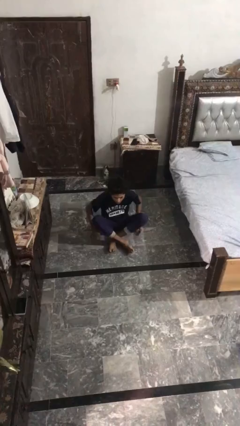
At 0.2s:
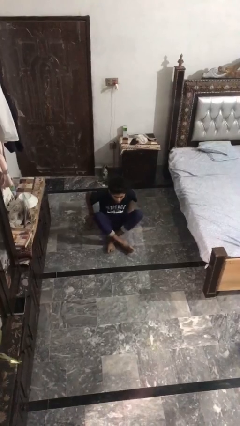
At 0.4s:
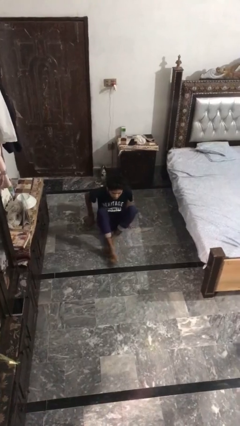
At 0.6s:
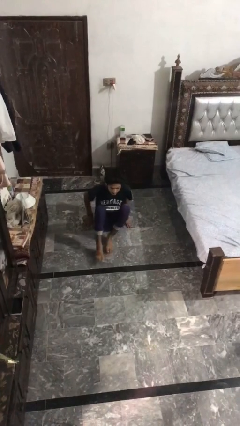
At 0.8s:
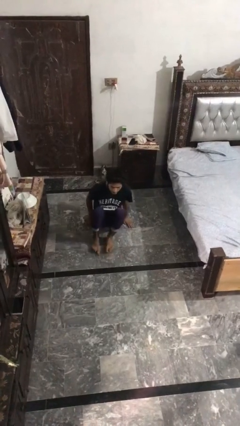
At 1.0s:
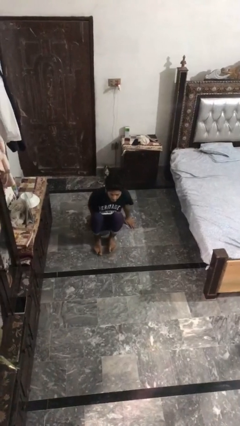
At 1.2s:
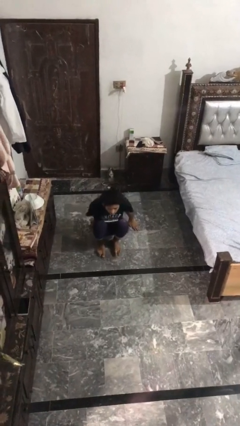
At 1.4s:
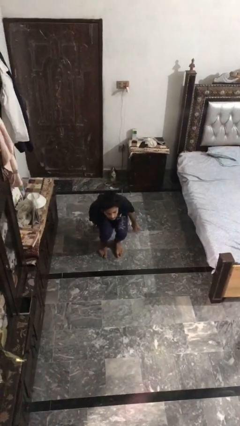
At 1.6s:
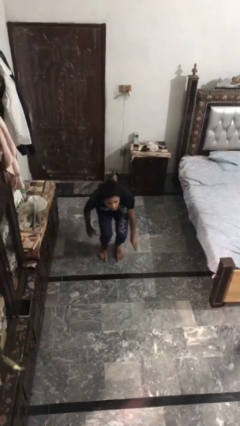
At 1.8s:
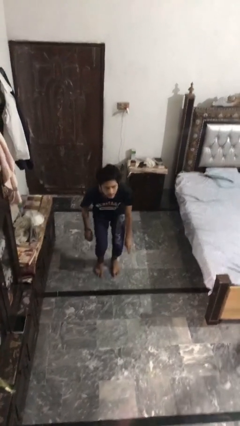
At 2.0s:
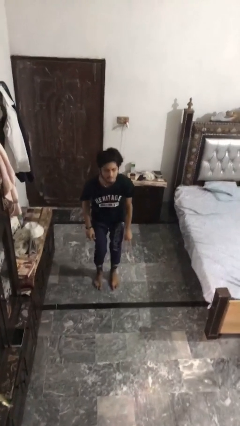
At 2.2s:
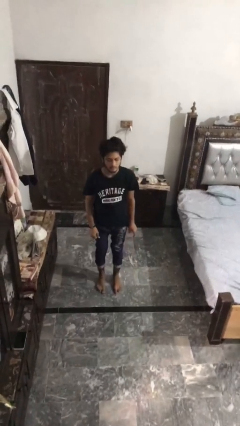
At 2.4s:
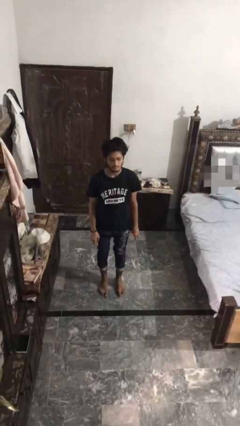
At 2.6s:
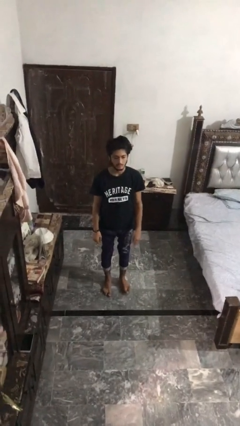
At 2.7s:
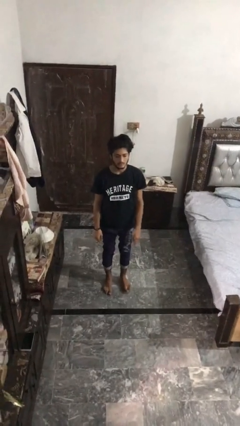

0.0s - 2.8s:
person stands up from floor

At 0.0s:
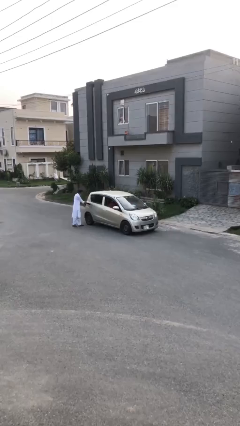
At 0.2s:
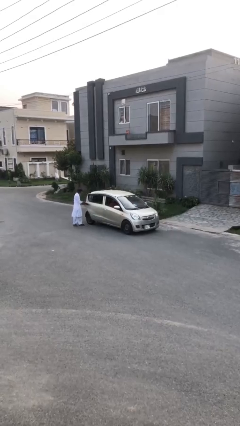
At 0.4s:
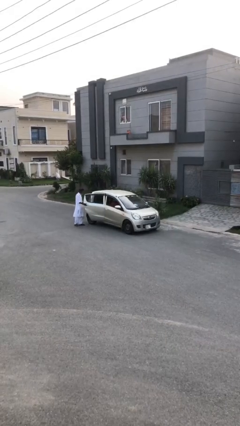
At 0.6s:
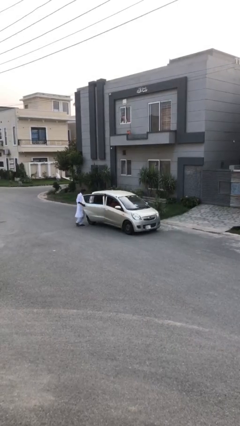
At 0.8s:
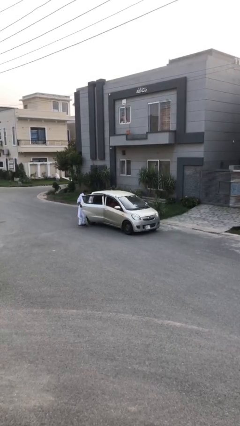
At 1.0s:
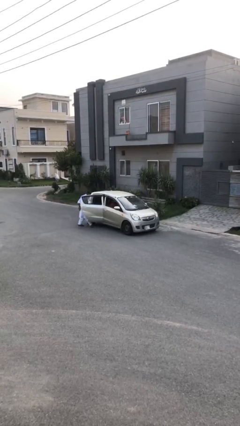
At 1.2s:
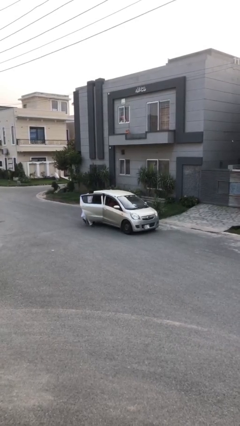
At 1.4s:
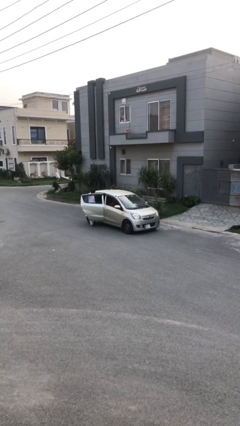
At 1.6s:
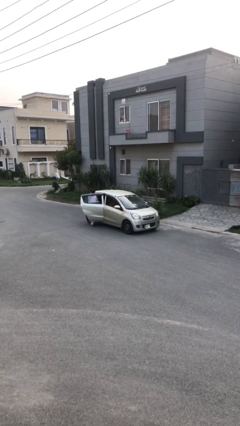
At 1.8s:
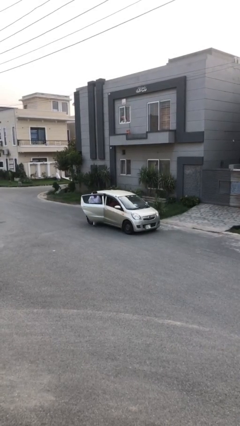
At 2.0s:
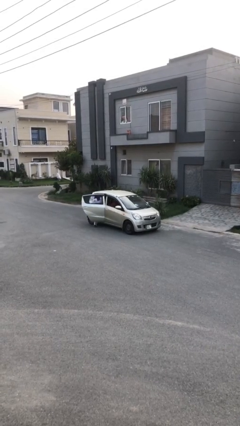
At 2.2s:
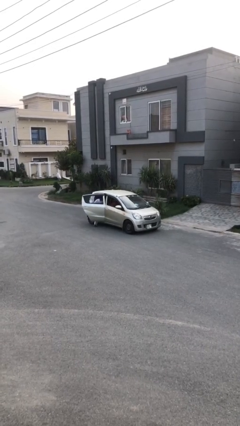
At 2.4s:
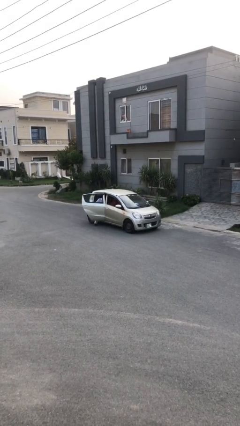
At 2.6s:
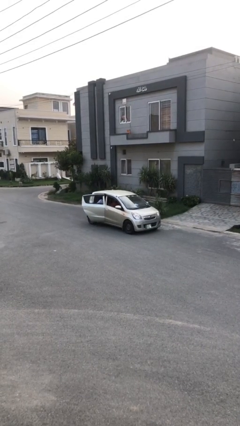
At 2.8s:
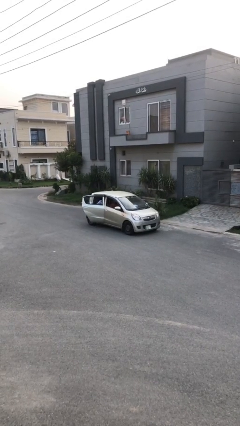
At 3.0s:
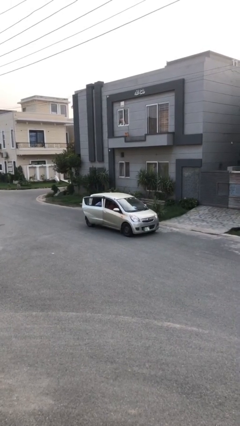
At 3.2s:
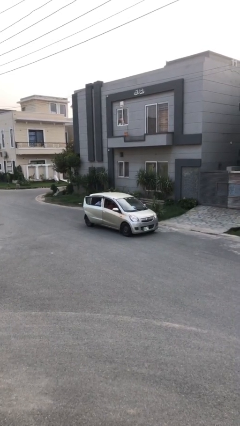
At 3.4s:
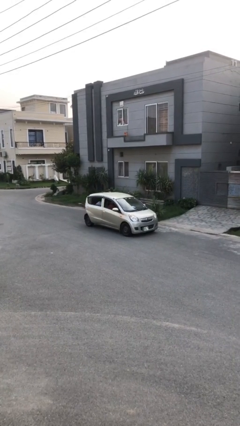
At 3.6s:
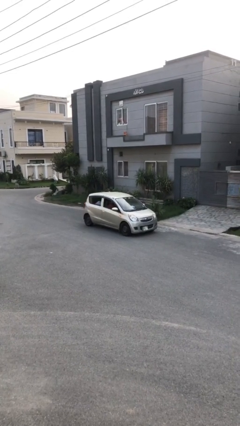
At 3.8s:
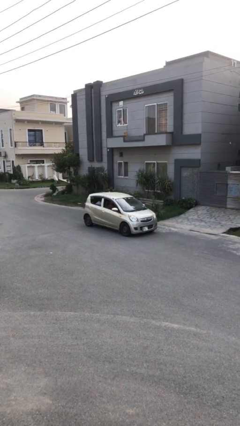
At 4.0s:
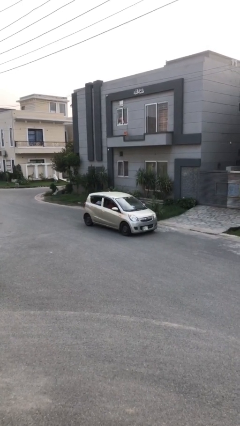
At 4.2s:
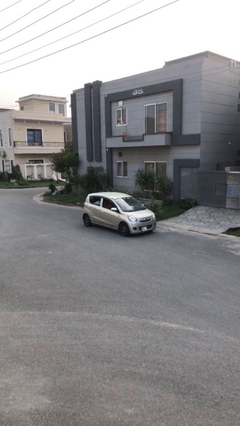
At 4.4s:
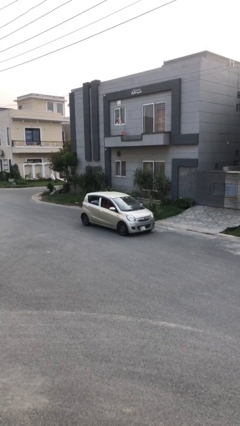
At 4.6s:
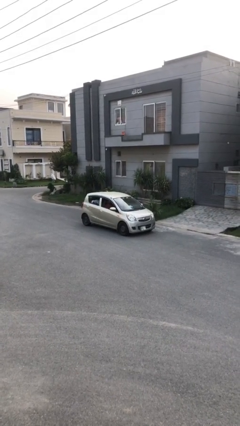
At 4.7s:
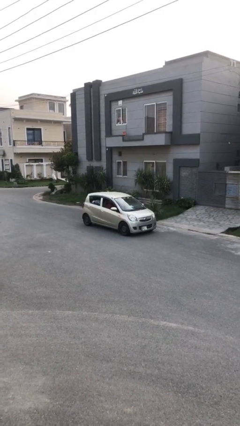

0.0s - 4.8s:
car picks up person

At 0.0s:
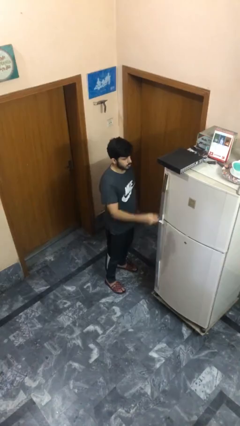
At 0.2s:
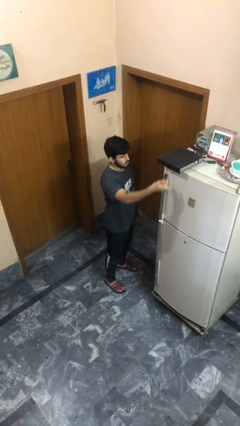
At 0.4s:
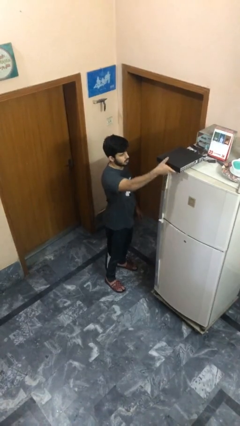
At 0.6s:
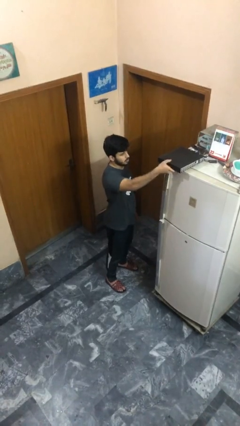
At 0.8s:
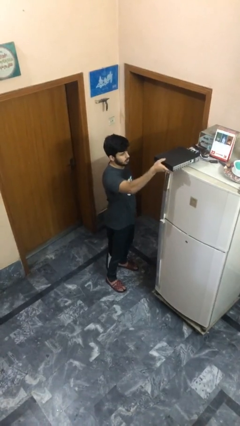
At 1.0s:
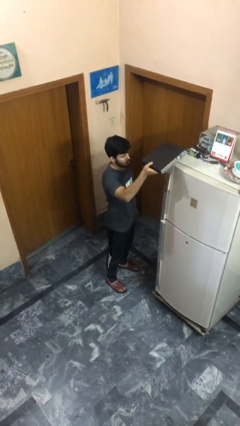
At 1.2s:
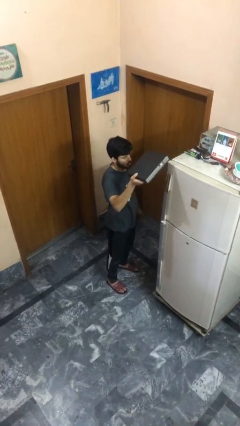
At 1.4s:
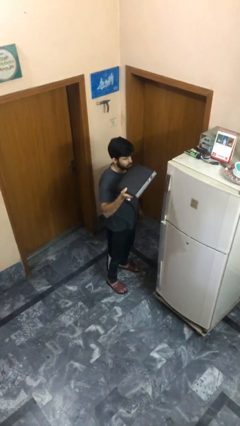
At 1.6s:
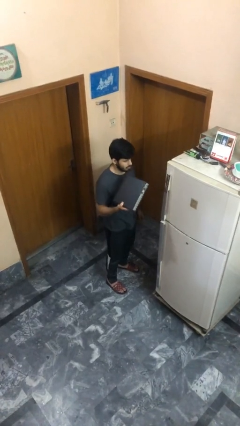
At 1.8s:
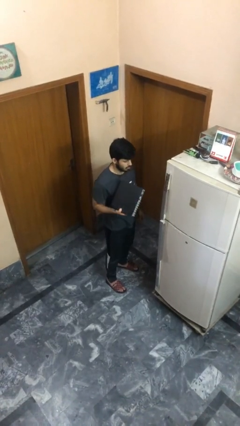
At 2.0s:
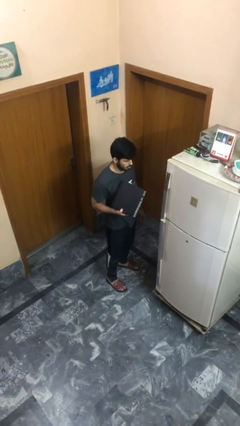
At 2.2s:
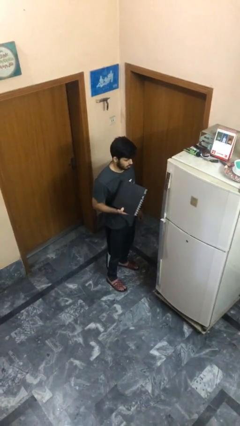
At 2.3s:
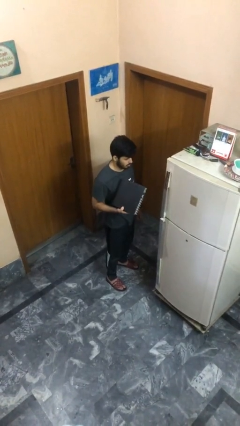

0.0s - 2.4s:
person picks up object from countertop

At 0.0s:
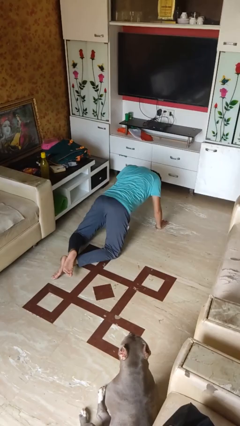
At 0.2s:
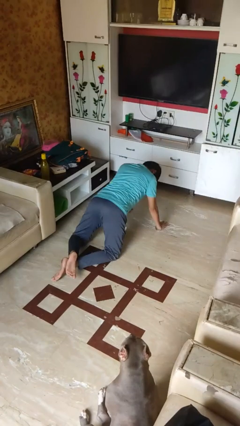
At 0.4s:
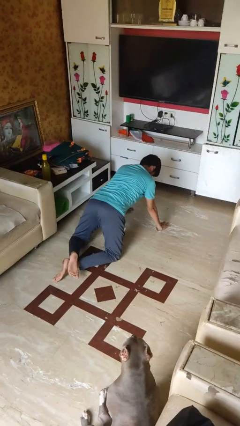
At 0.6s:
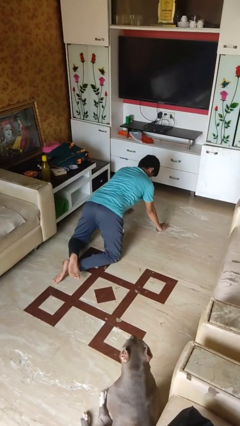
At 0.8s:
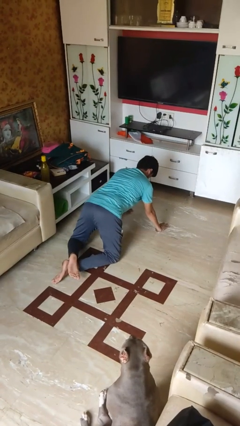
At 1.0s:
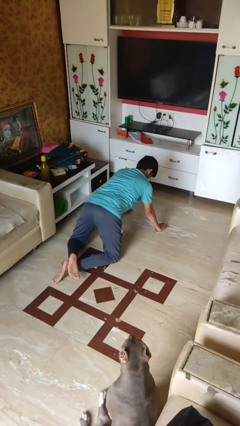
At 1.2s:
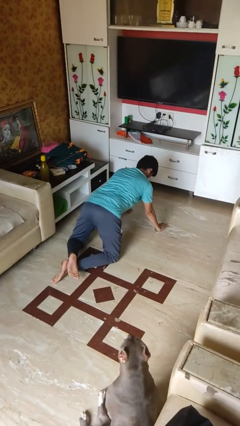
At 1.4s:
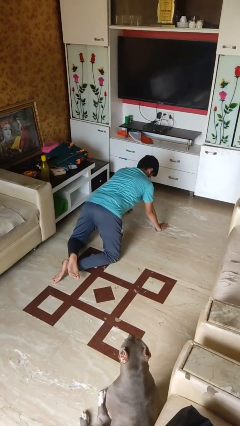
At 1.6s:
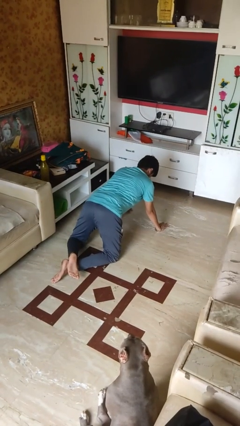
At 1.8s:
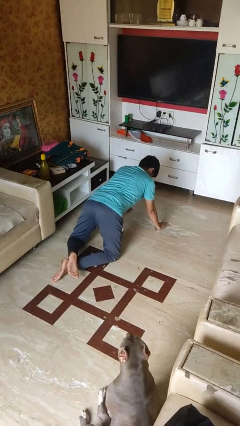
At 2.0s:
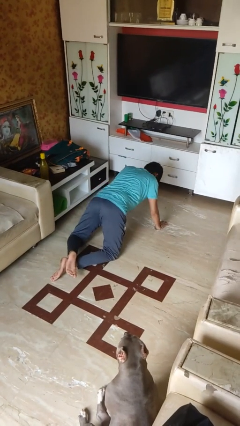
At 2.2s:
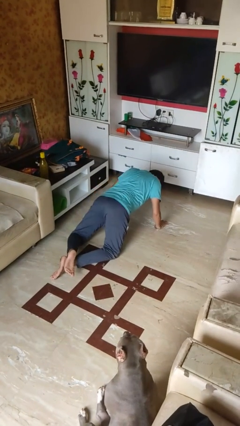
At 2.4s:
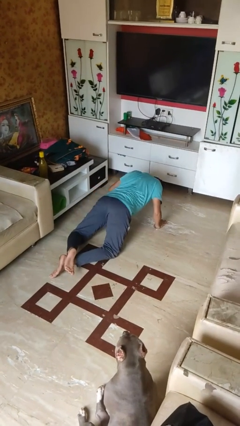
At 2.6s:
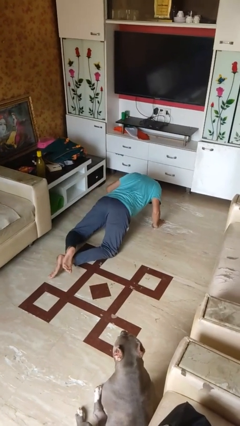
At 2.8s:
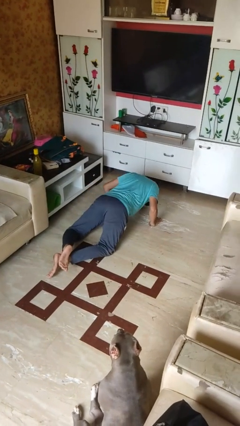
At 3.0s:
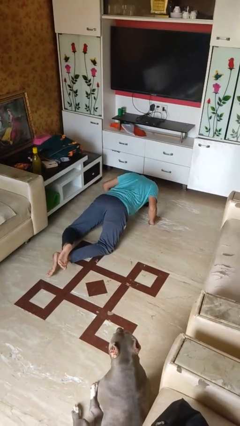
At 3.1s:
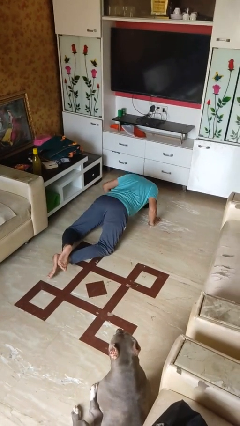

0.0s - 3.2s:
person exercises with pushup

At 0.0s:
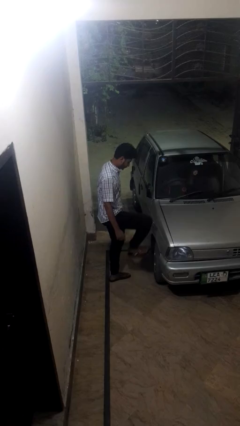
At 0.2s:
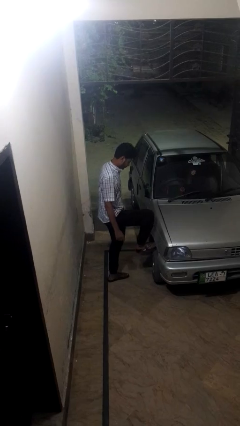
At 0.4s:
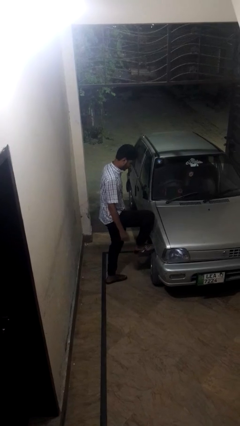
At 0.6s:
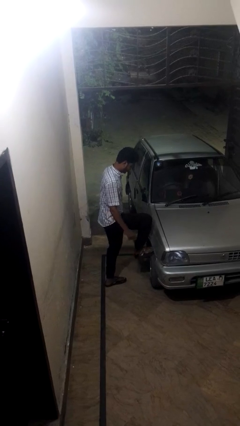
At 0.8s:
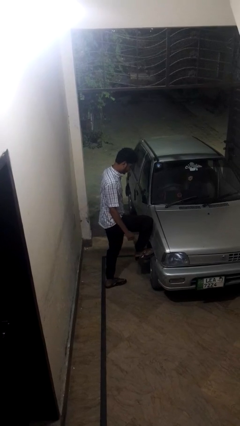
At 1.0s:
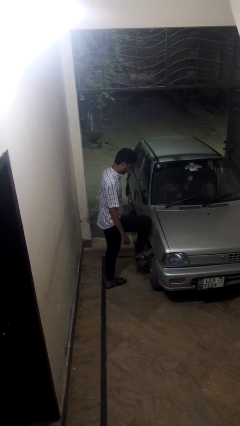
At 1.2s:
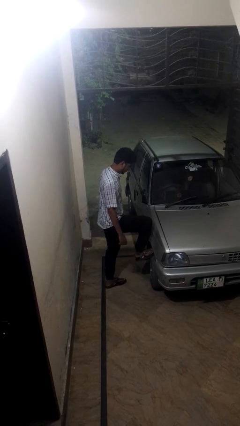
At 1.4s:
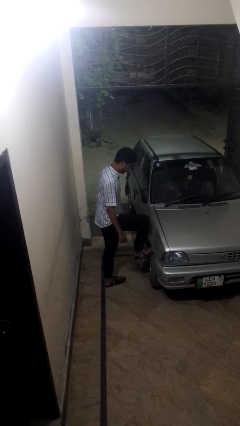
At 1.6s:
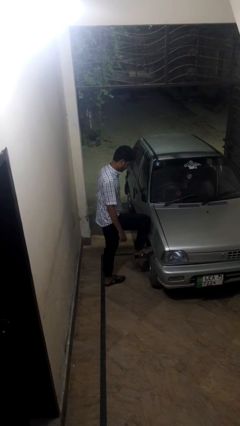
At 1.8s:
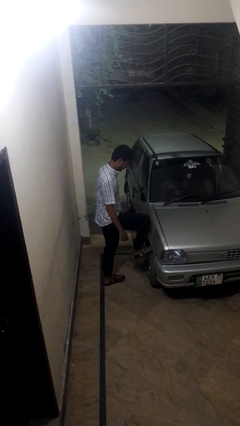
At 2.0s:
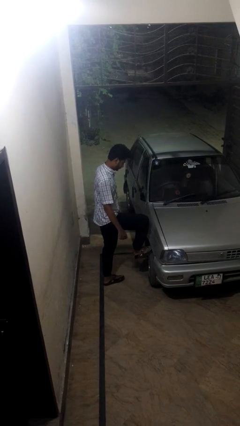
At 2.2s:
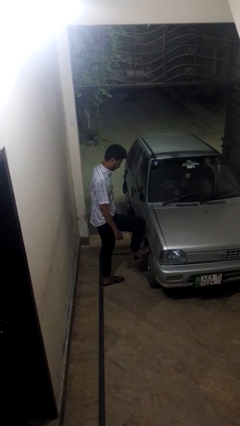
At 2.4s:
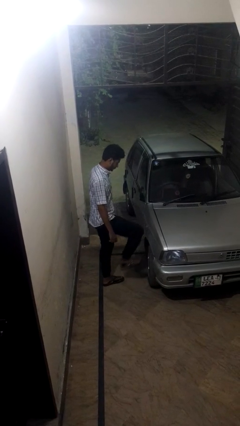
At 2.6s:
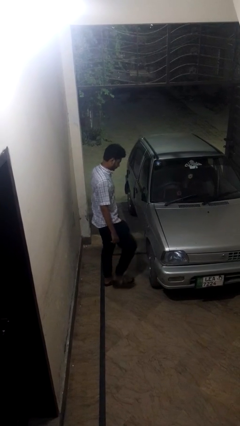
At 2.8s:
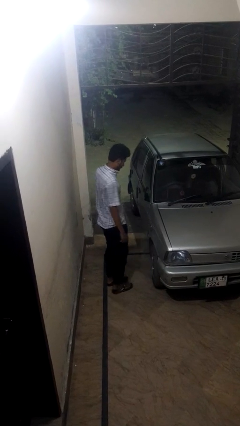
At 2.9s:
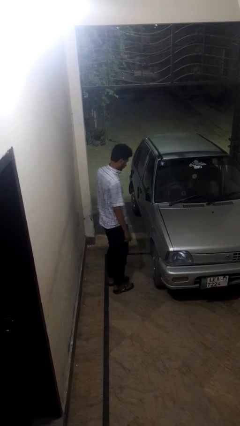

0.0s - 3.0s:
person kicks car tires

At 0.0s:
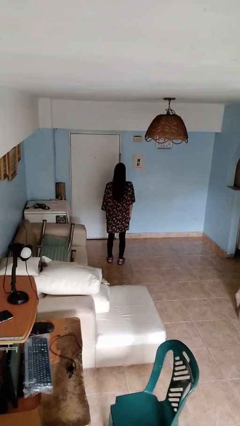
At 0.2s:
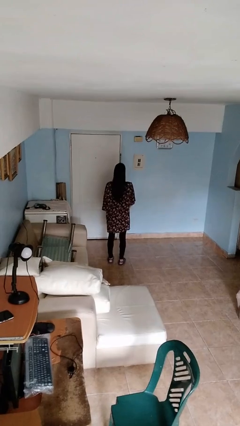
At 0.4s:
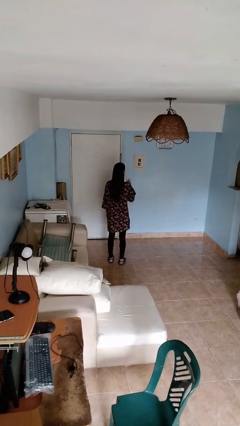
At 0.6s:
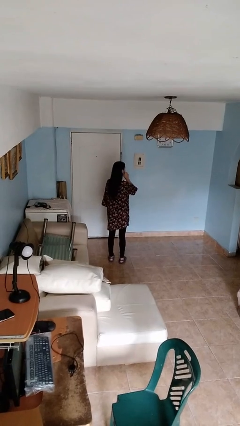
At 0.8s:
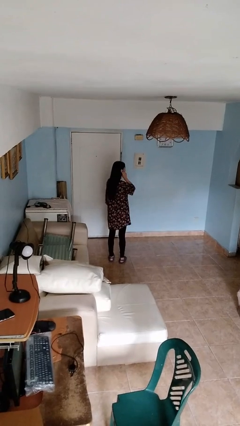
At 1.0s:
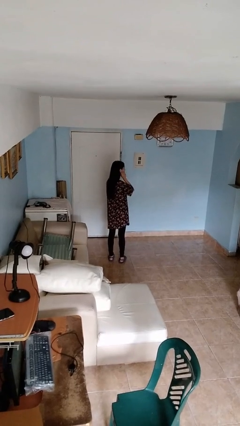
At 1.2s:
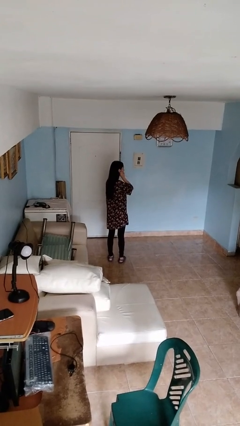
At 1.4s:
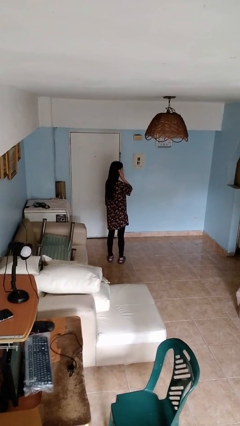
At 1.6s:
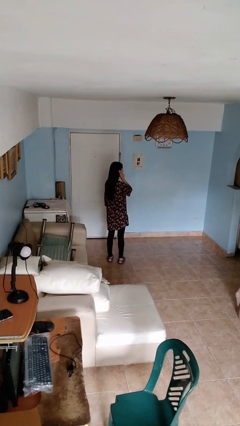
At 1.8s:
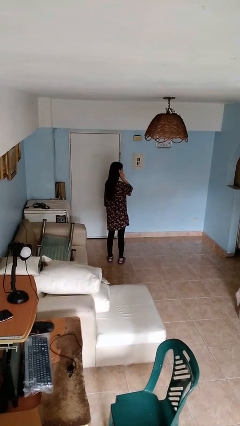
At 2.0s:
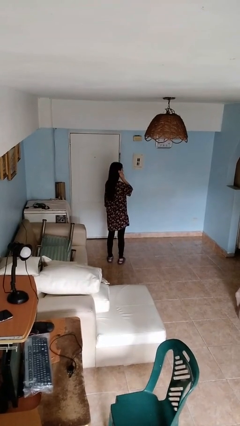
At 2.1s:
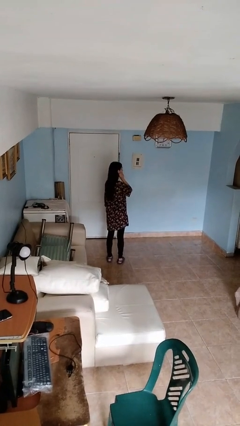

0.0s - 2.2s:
person touches earlobe
